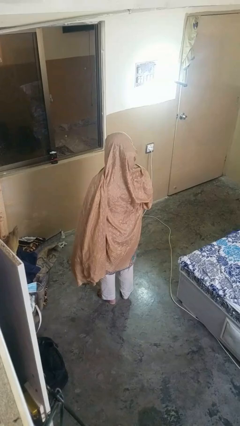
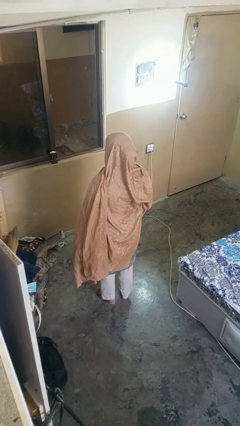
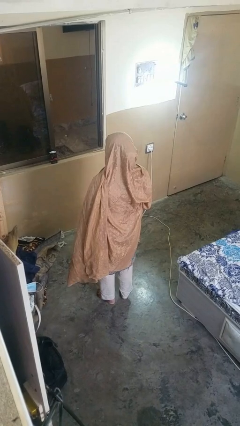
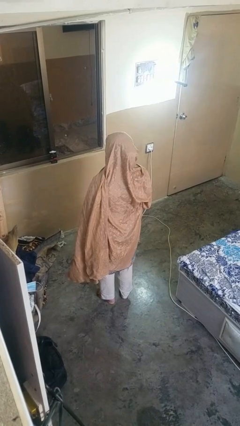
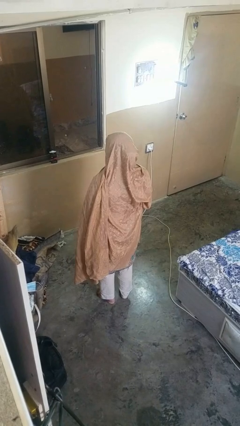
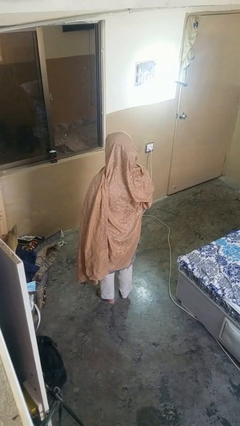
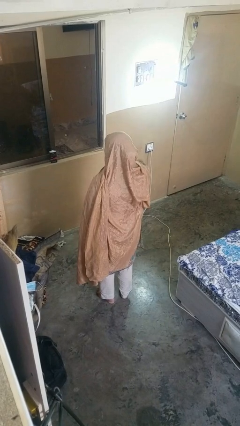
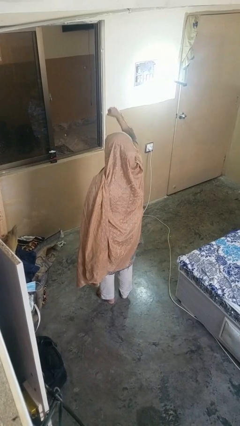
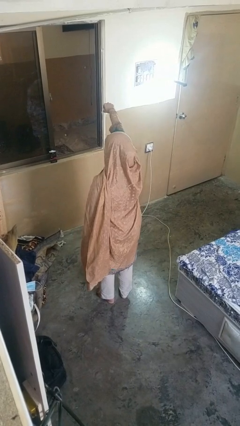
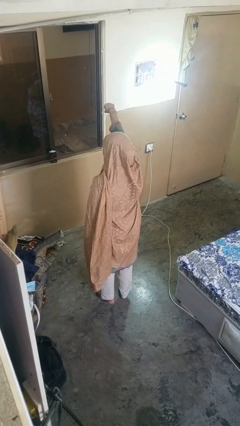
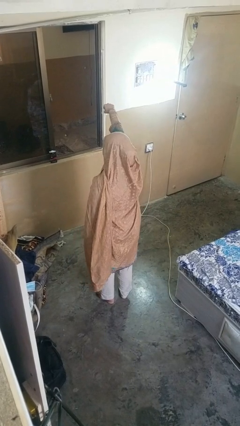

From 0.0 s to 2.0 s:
person punches

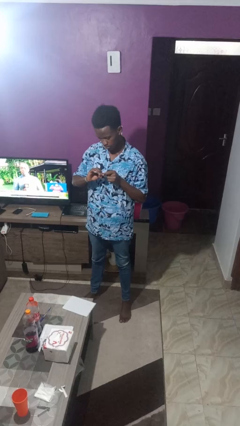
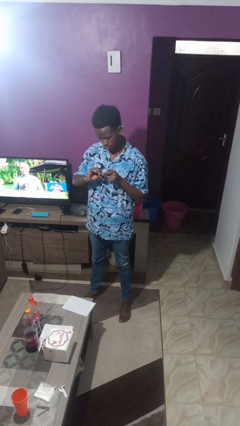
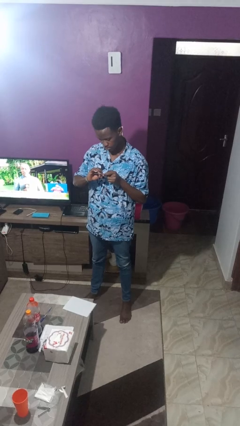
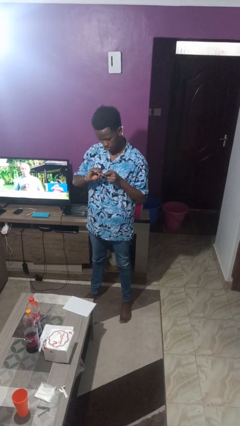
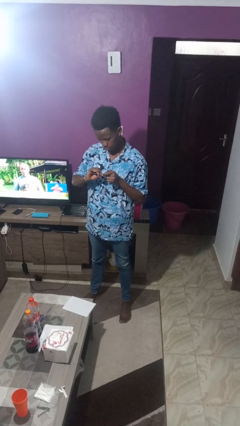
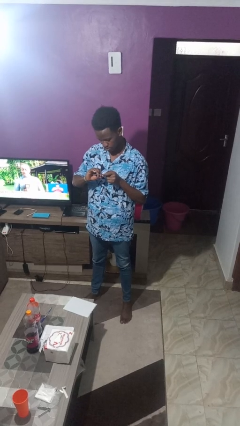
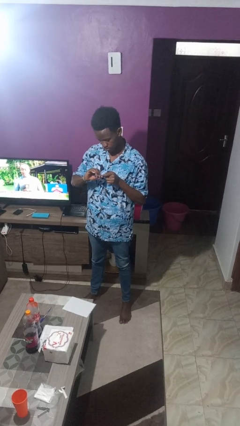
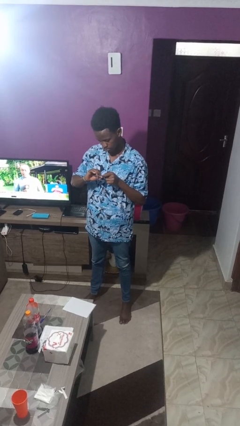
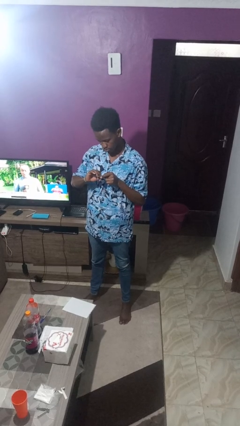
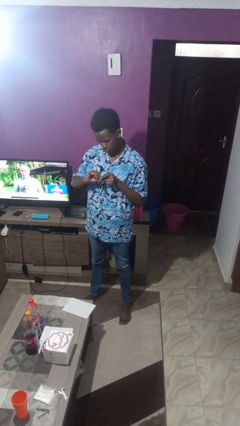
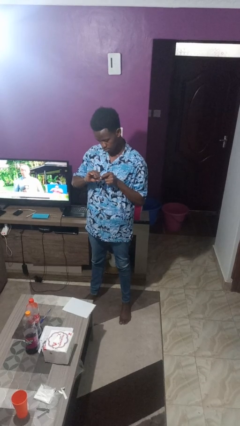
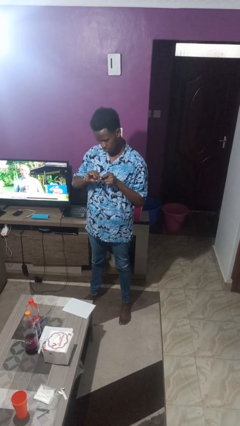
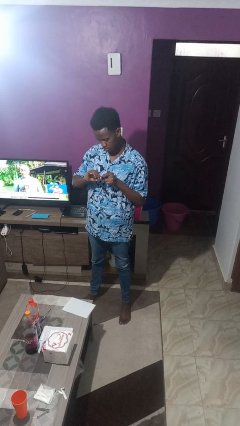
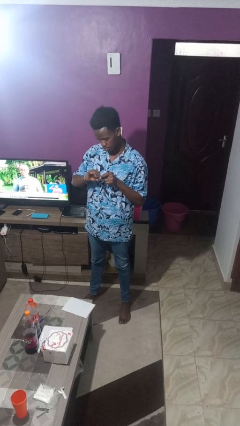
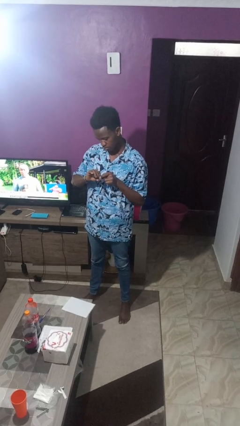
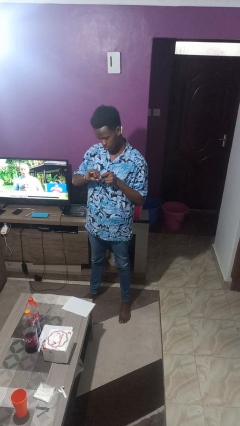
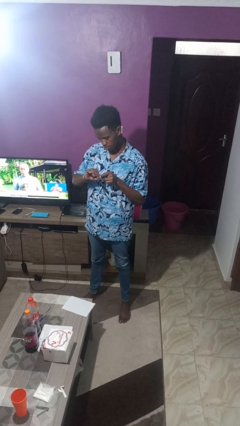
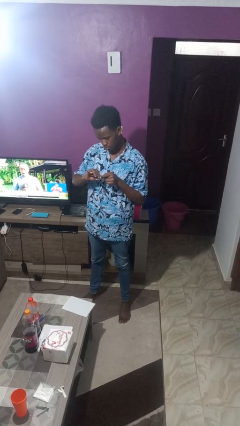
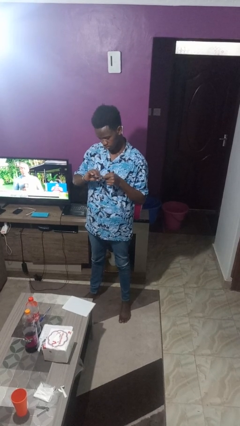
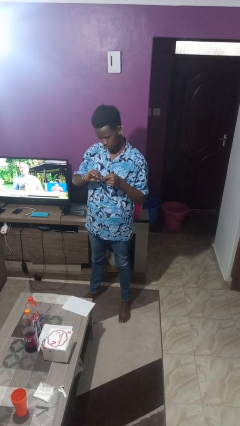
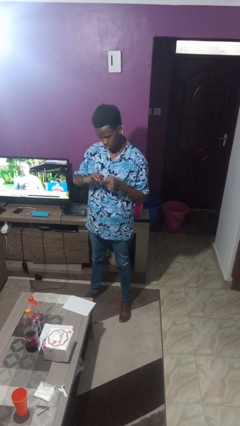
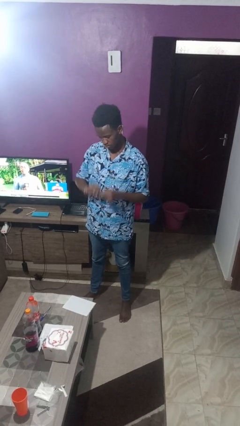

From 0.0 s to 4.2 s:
person files fingernails

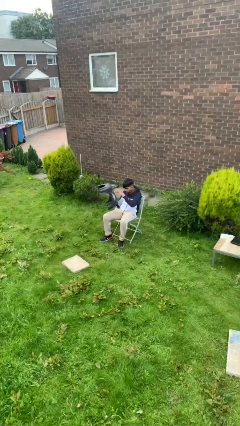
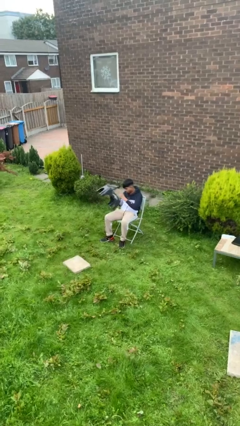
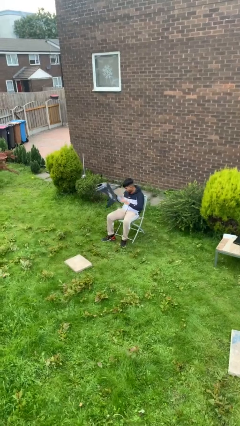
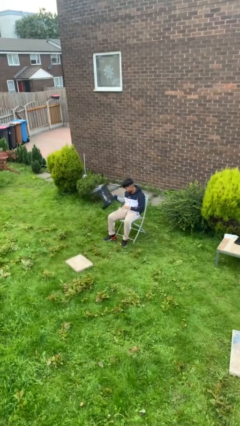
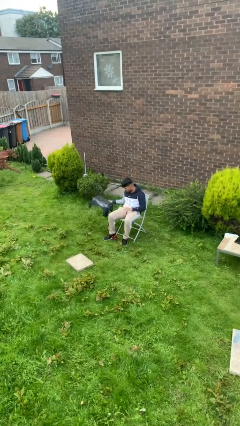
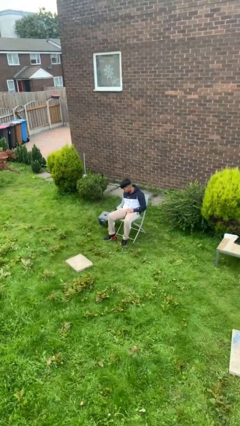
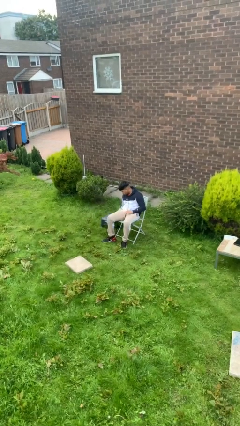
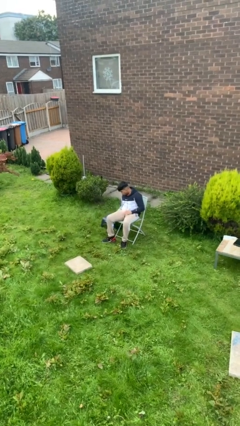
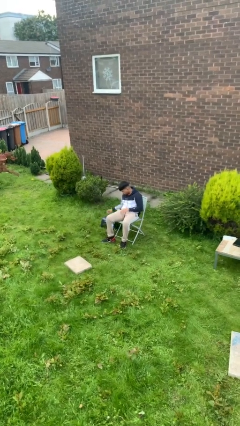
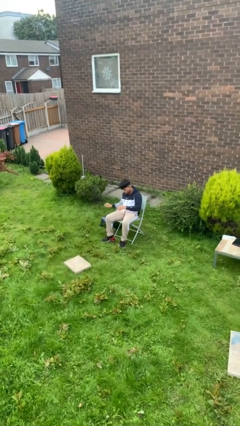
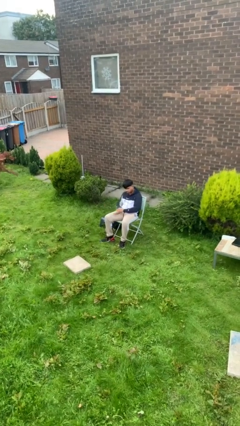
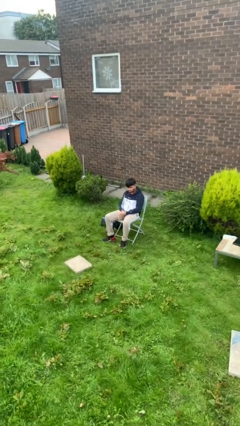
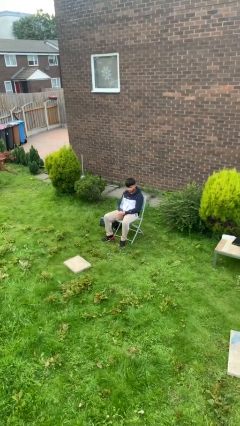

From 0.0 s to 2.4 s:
person puts down object on floor

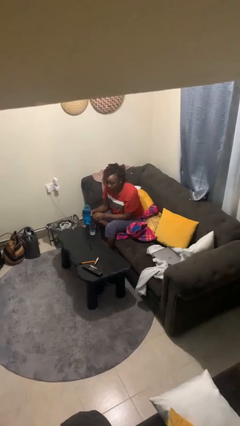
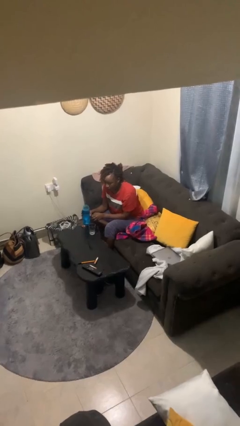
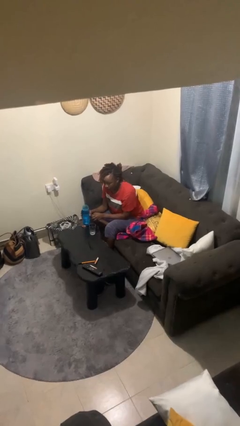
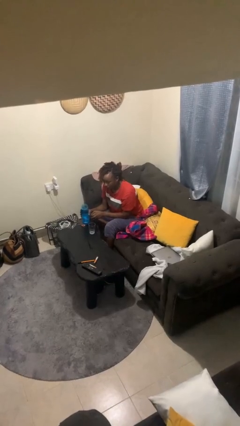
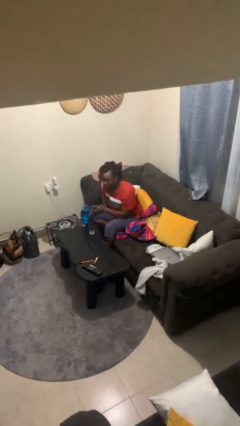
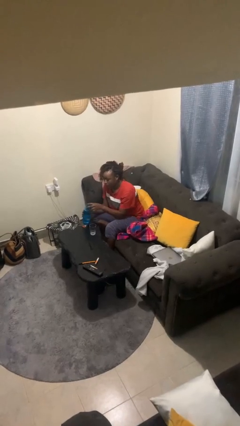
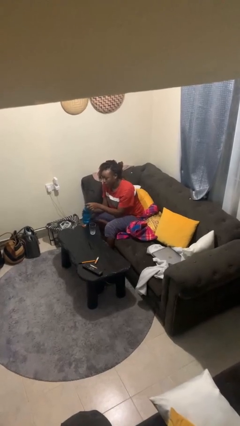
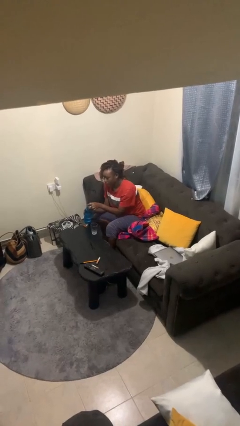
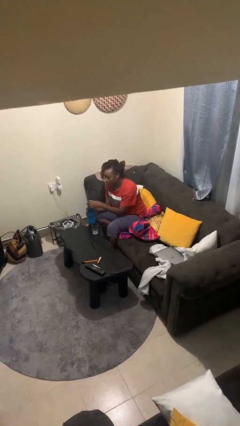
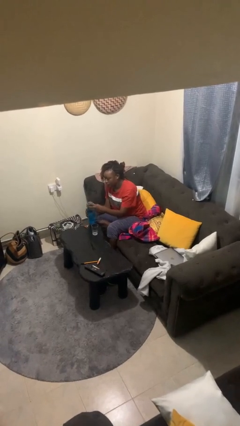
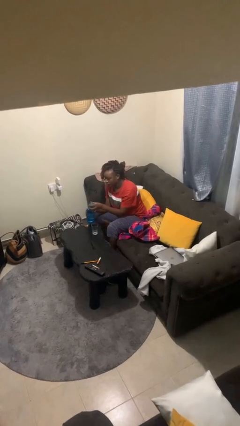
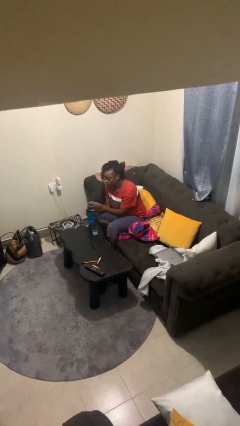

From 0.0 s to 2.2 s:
person screws lid to bottle

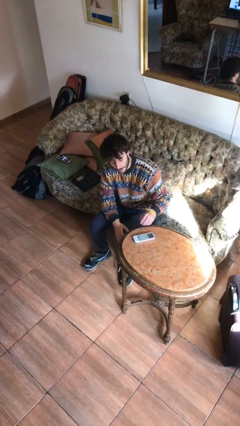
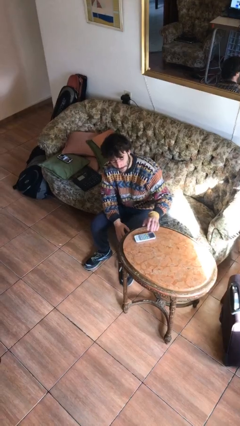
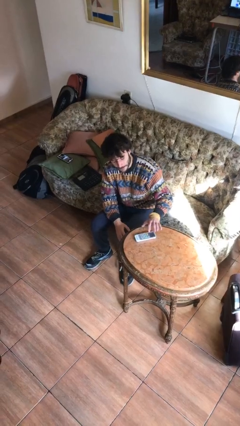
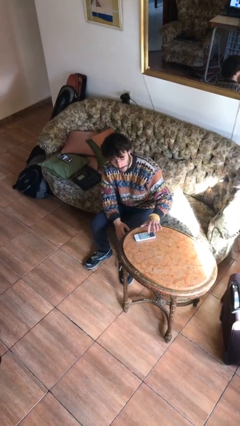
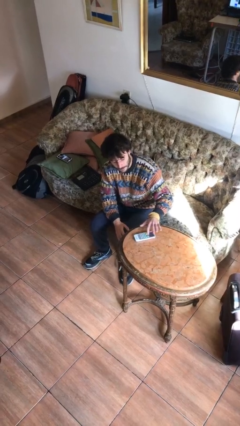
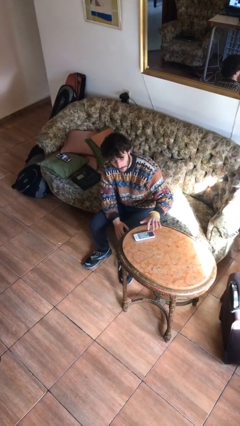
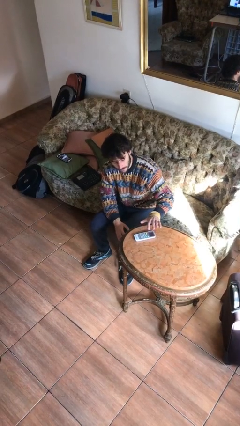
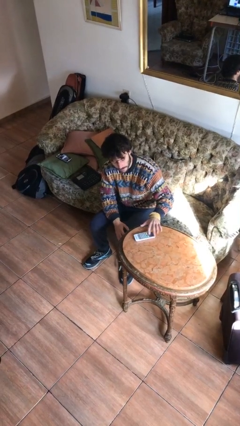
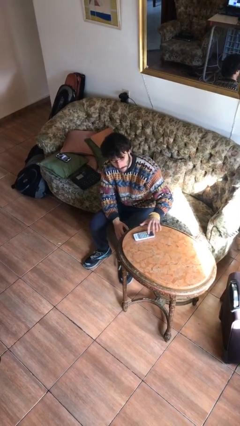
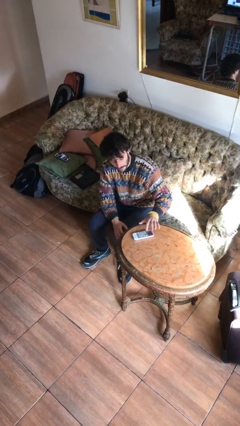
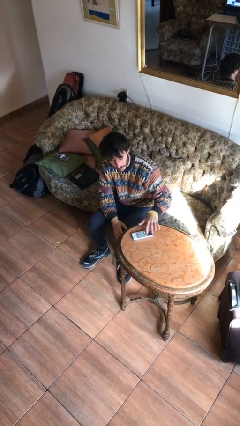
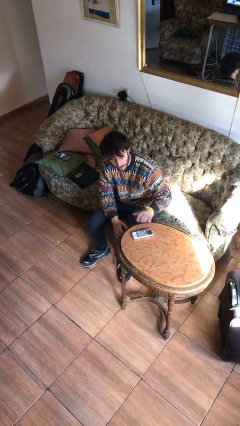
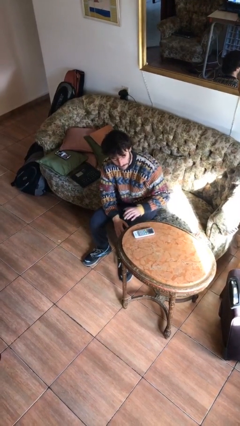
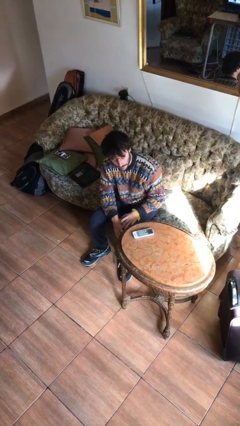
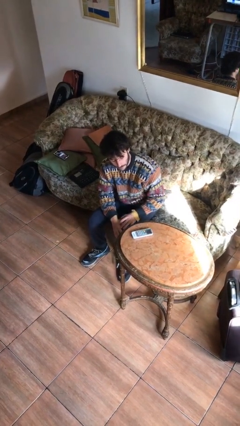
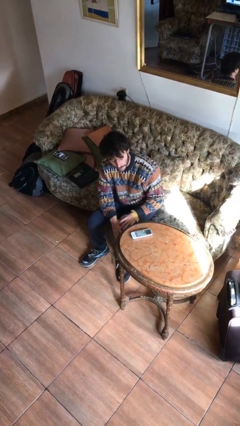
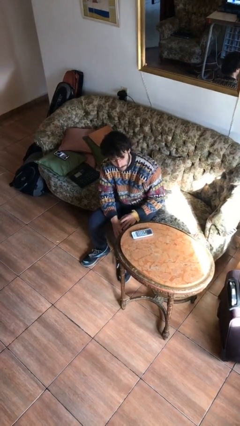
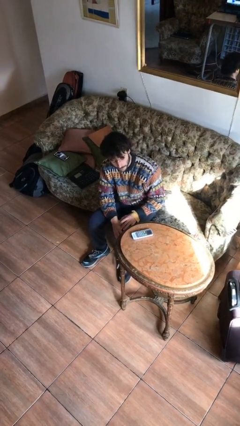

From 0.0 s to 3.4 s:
person taps object with finger

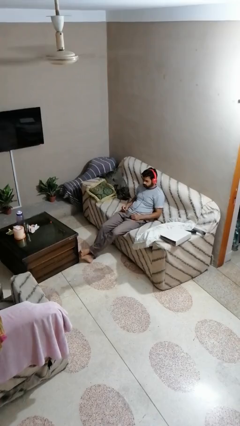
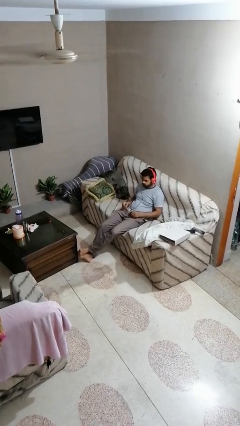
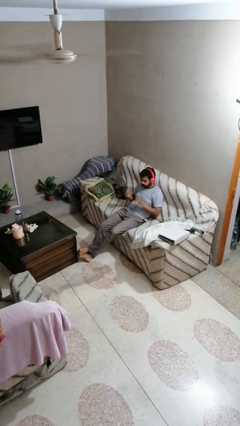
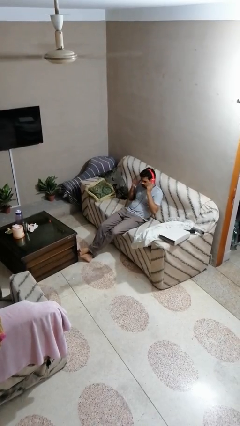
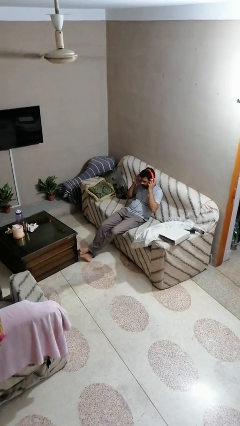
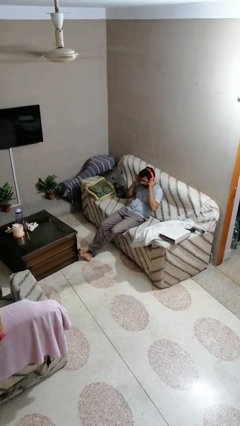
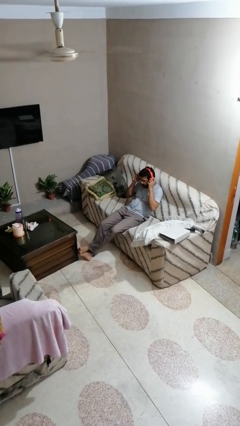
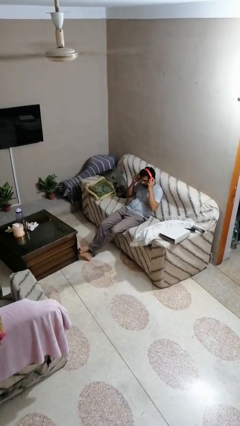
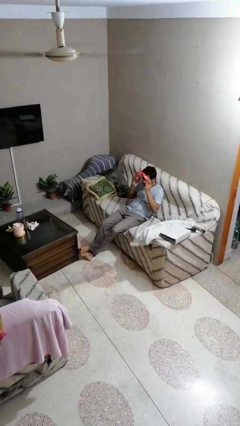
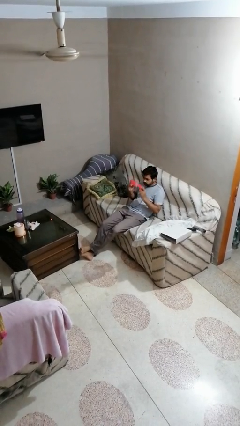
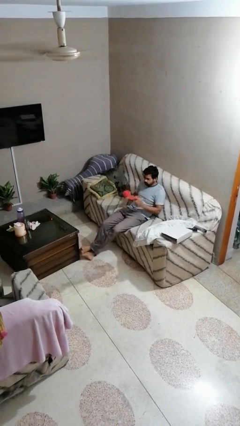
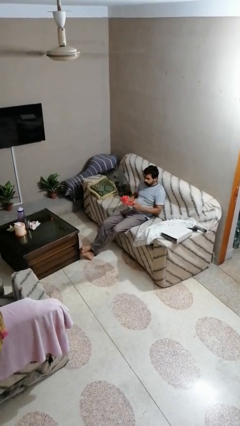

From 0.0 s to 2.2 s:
person takes off headphones

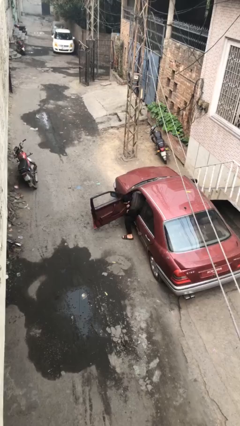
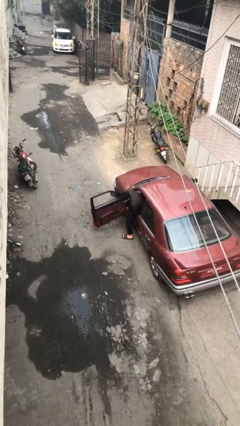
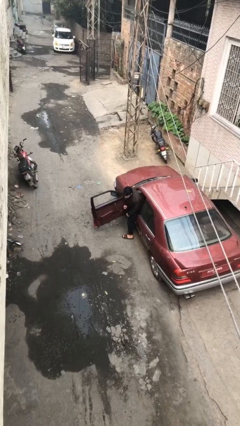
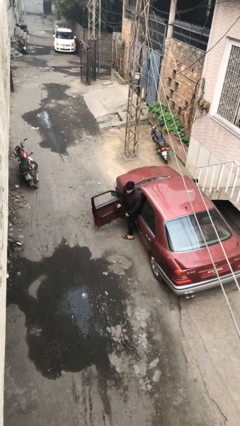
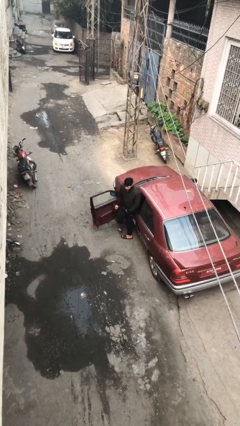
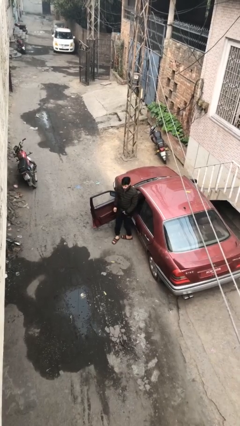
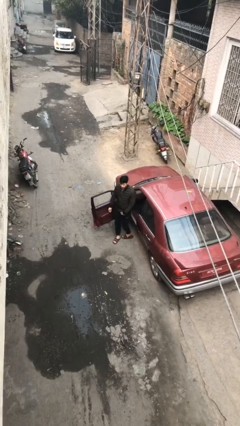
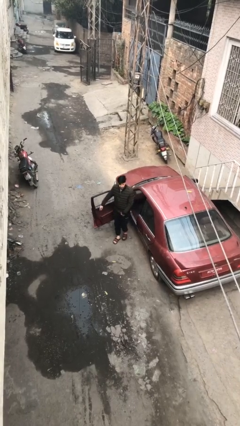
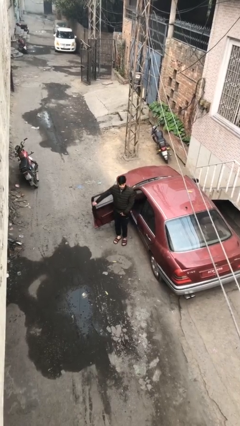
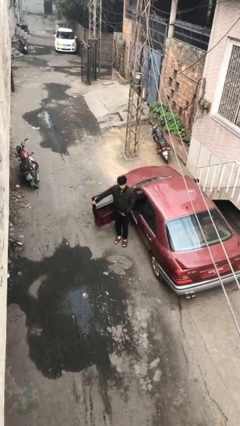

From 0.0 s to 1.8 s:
person exits car
